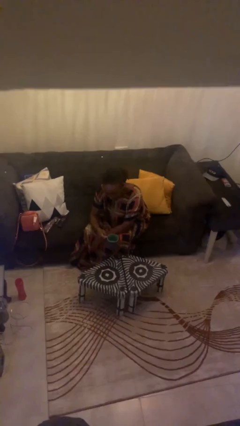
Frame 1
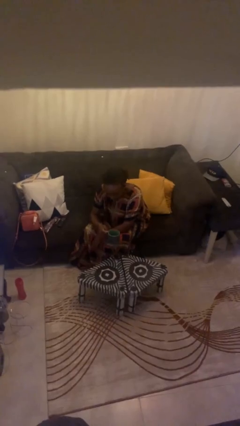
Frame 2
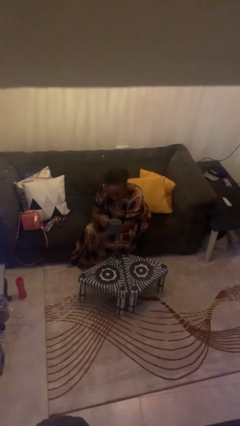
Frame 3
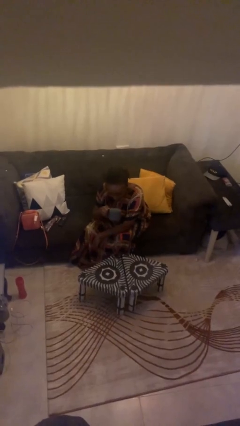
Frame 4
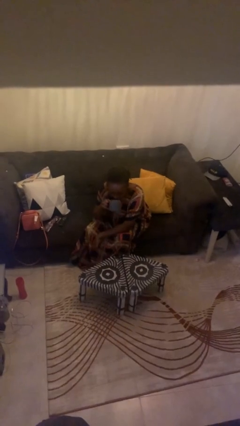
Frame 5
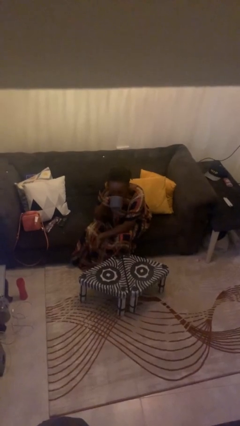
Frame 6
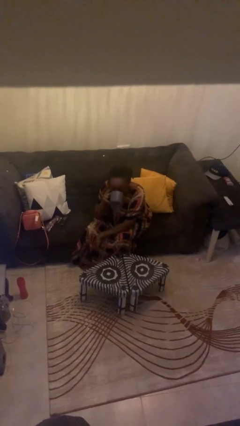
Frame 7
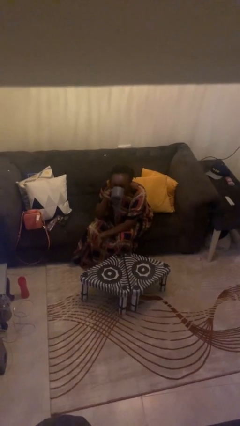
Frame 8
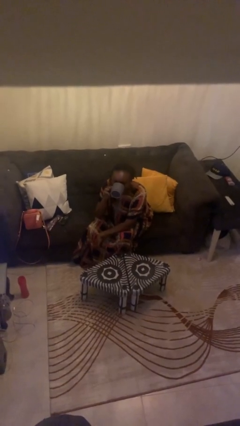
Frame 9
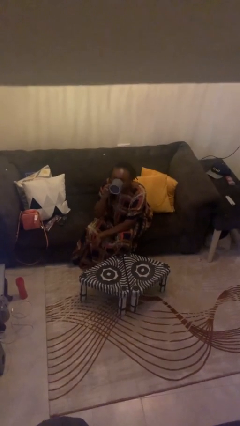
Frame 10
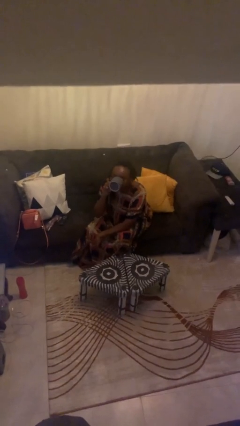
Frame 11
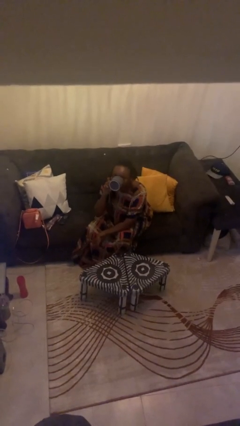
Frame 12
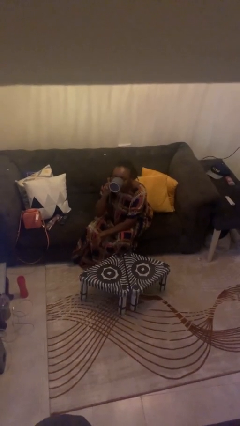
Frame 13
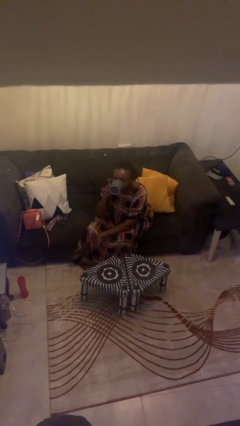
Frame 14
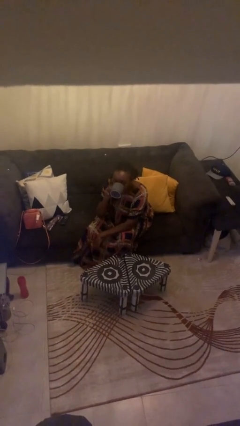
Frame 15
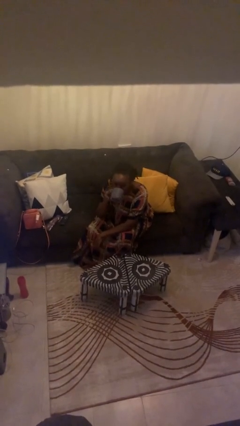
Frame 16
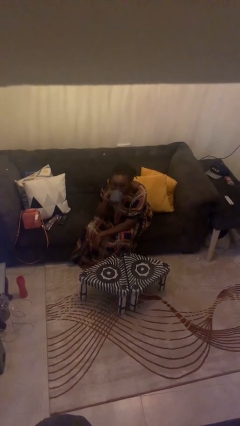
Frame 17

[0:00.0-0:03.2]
person drinks from mug

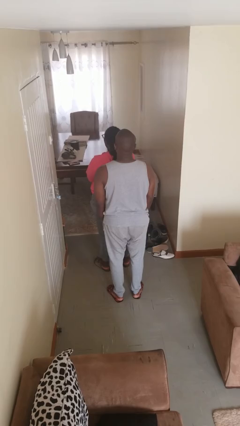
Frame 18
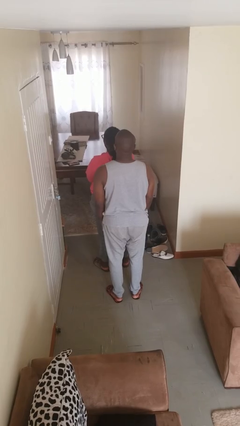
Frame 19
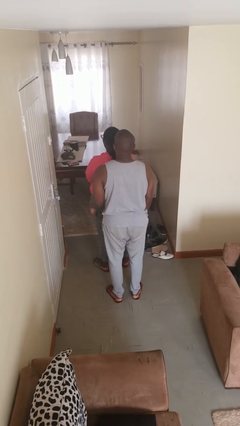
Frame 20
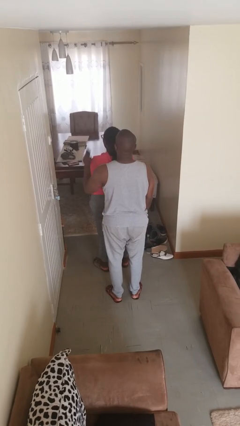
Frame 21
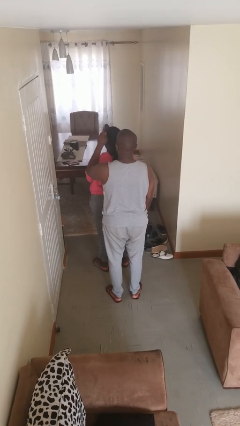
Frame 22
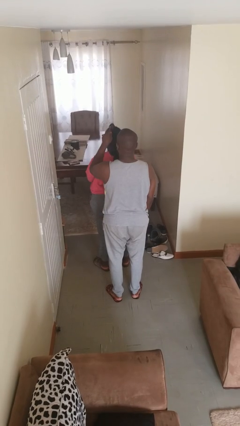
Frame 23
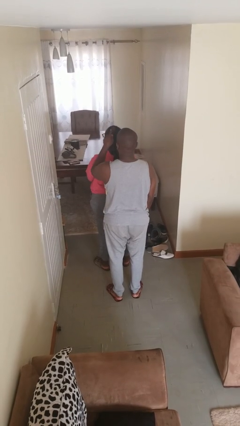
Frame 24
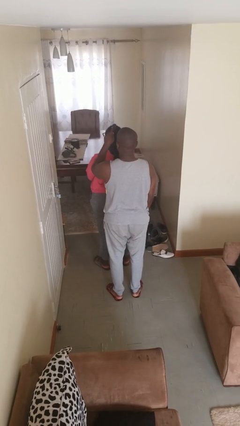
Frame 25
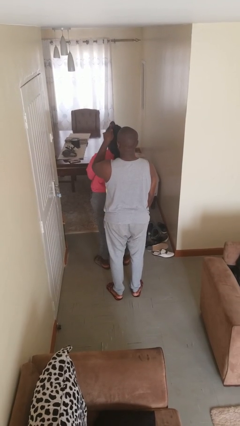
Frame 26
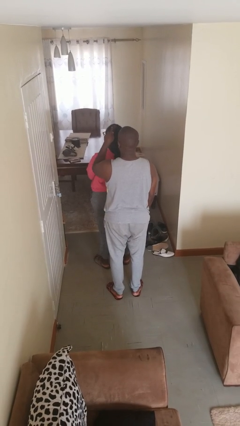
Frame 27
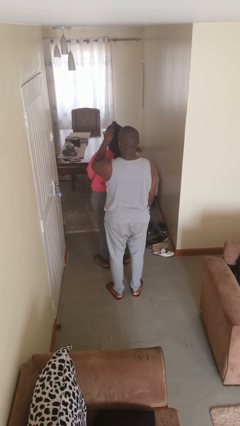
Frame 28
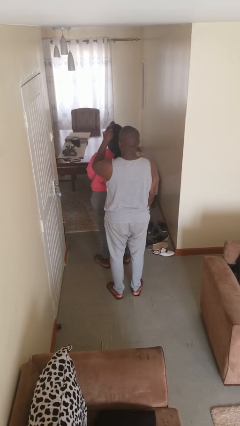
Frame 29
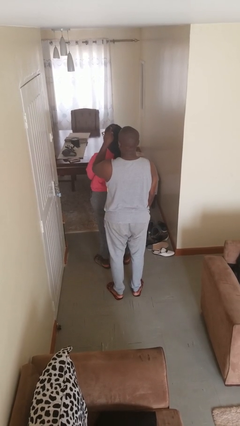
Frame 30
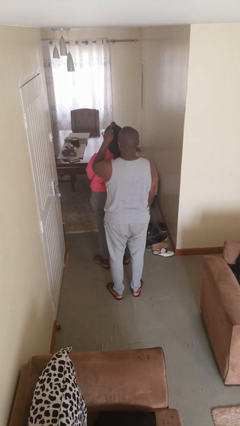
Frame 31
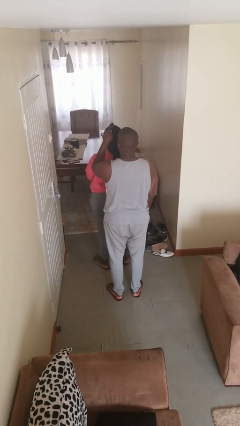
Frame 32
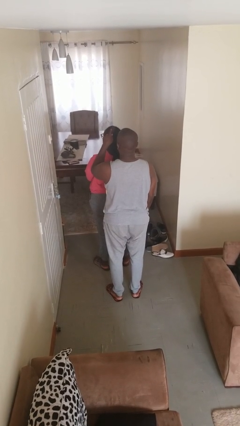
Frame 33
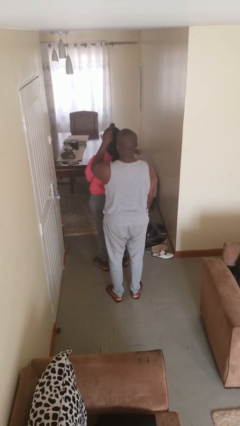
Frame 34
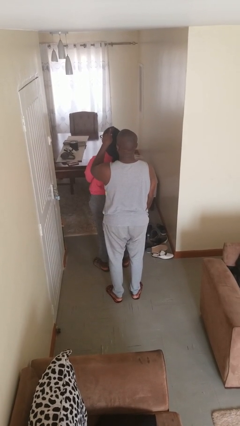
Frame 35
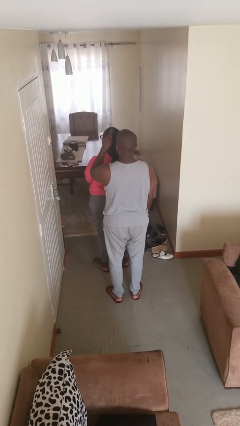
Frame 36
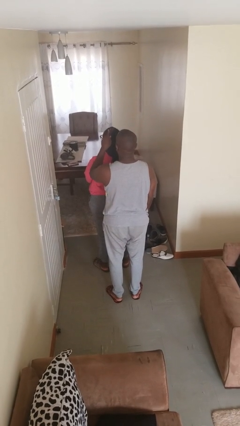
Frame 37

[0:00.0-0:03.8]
person brushes hair of person

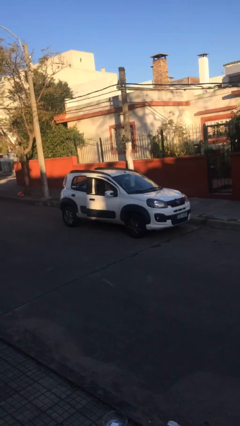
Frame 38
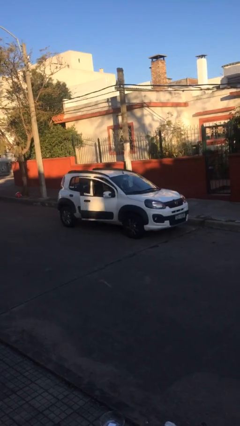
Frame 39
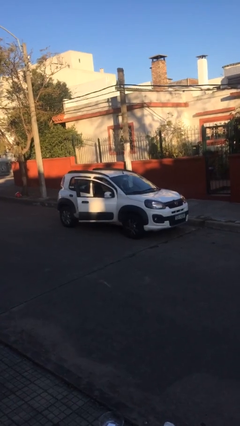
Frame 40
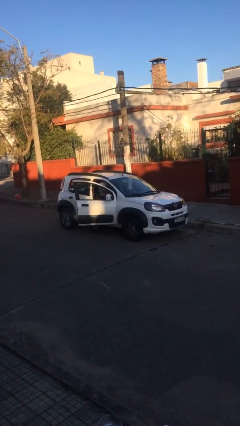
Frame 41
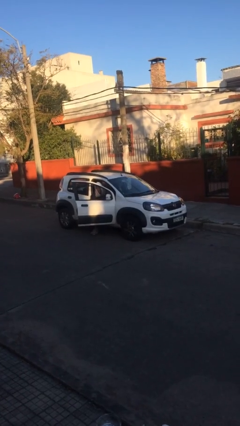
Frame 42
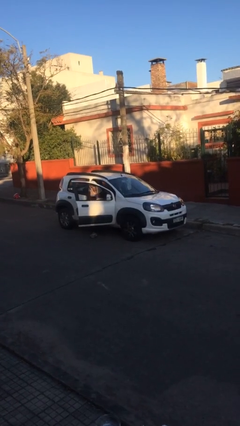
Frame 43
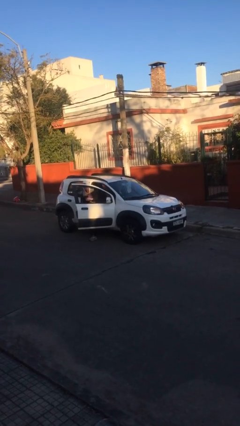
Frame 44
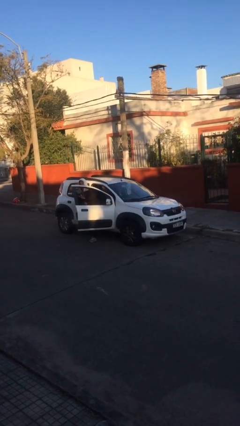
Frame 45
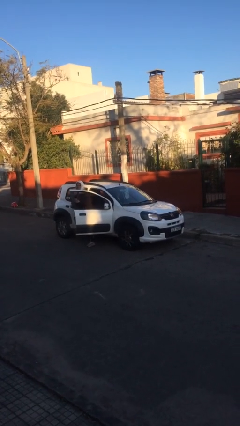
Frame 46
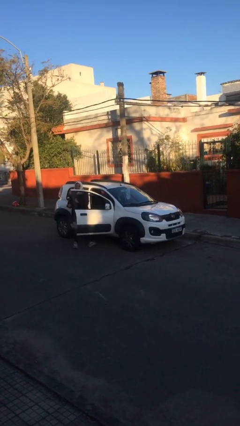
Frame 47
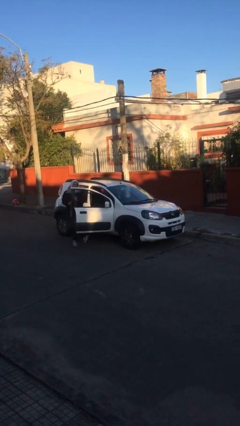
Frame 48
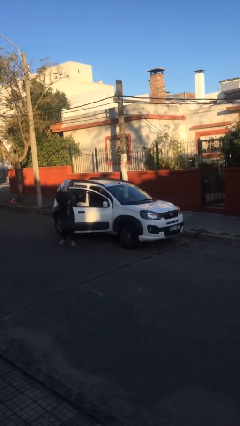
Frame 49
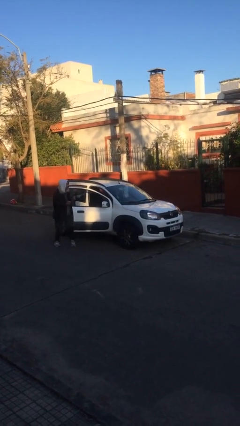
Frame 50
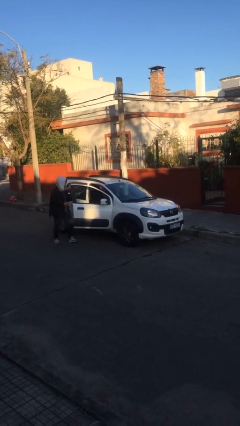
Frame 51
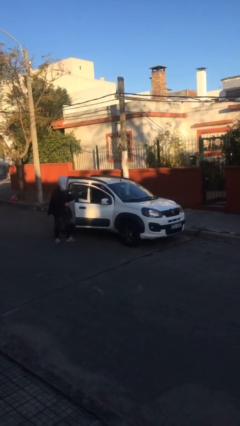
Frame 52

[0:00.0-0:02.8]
car drops off person

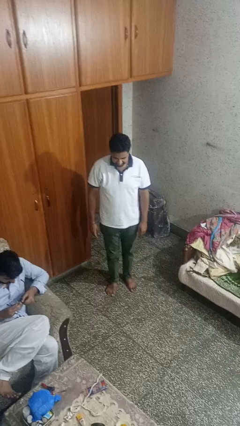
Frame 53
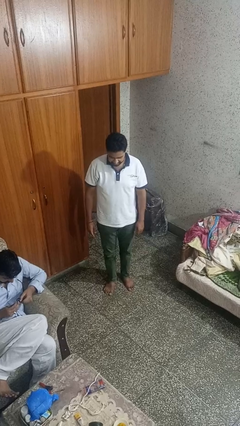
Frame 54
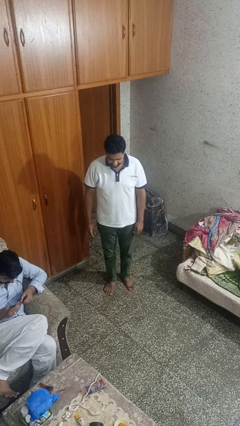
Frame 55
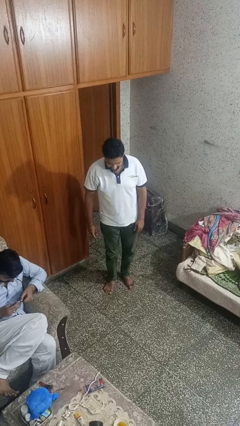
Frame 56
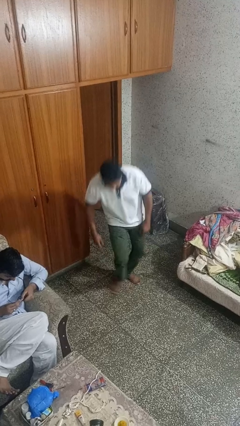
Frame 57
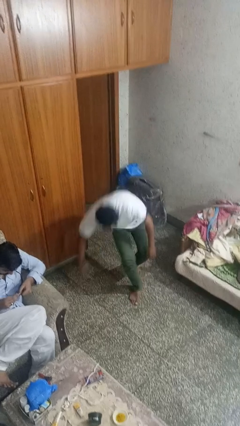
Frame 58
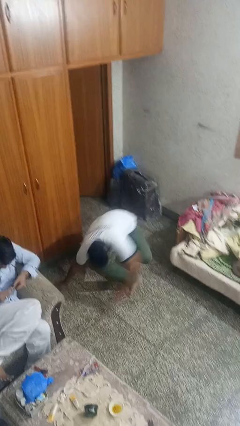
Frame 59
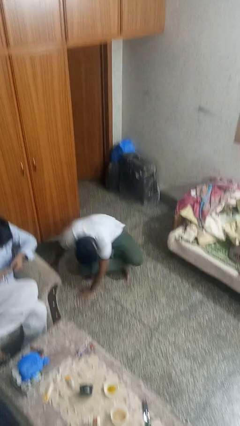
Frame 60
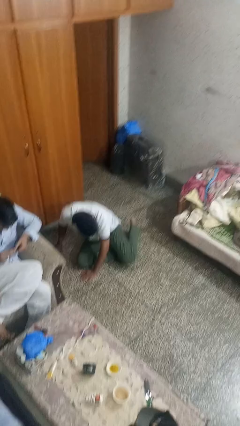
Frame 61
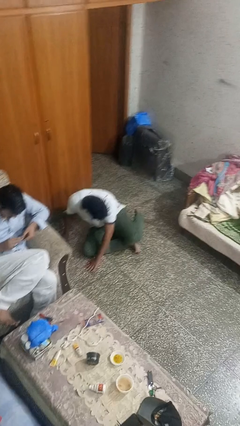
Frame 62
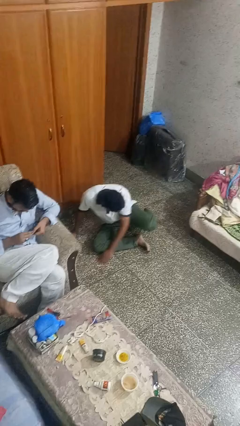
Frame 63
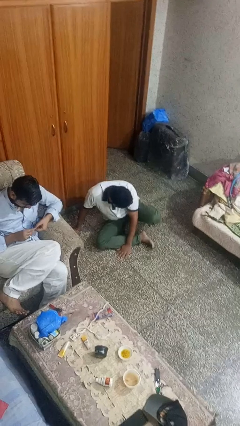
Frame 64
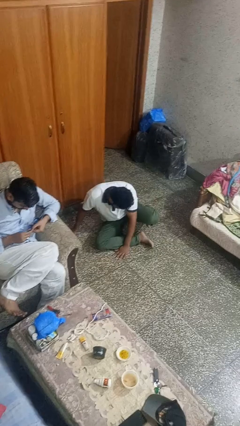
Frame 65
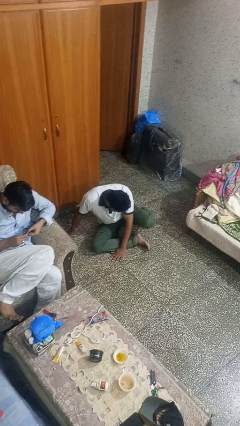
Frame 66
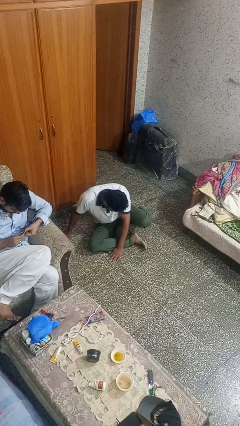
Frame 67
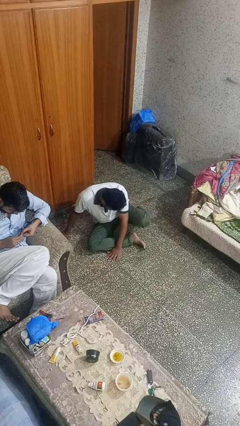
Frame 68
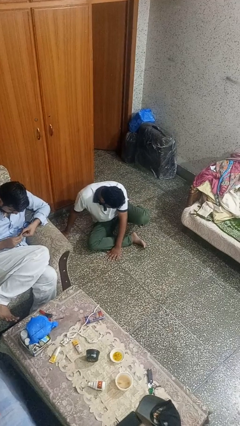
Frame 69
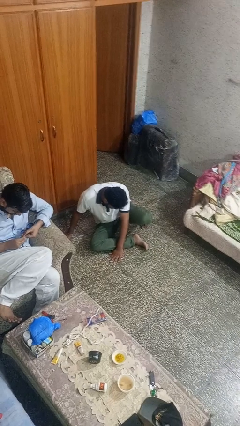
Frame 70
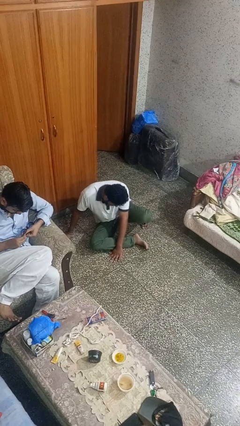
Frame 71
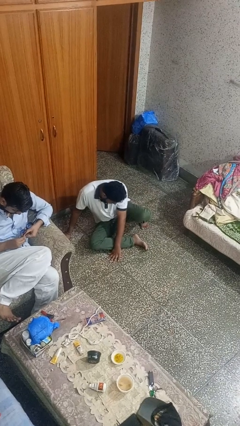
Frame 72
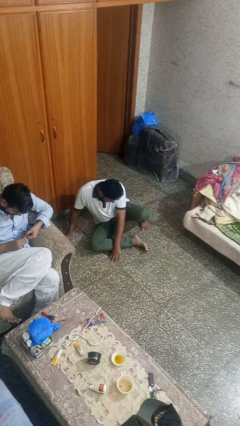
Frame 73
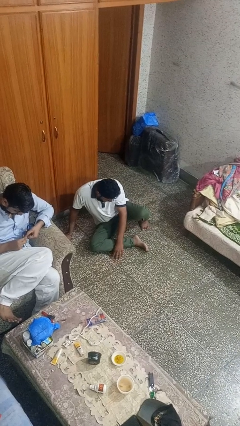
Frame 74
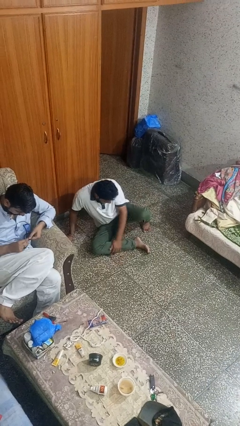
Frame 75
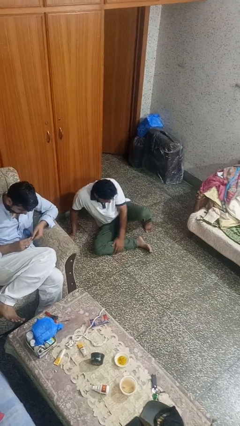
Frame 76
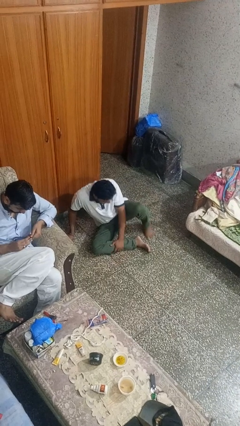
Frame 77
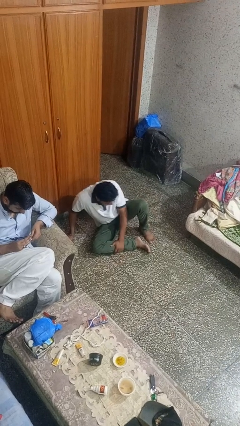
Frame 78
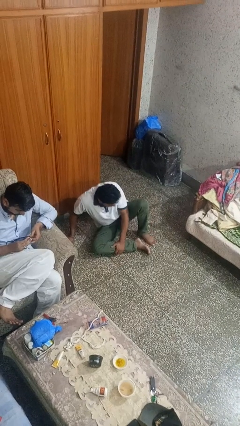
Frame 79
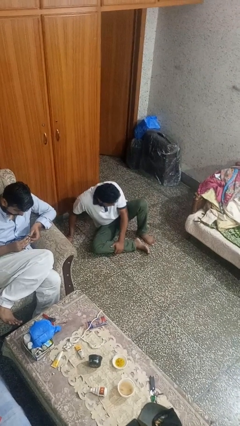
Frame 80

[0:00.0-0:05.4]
person falls while standing

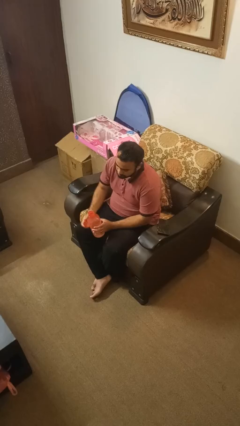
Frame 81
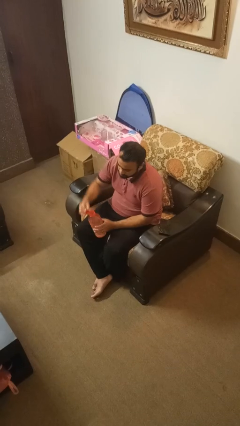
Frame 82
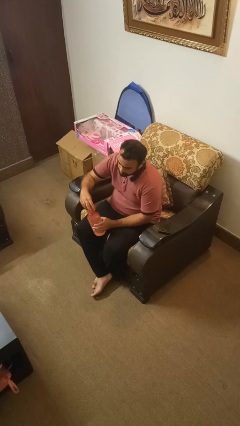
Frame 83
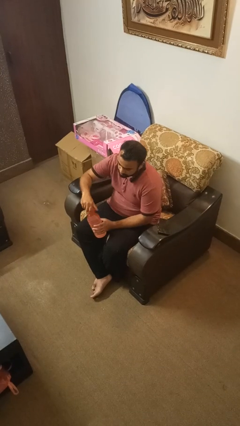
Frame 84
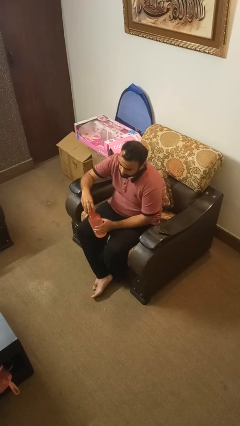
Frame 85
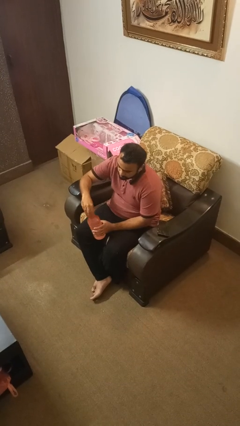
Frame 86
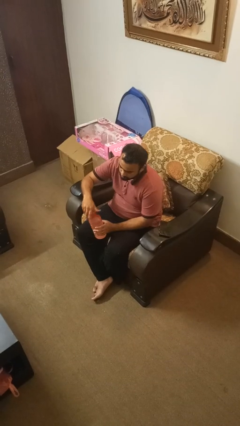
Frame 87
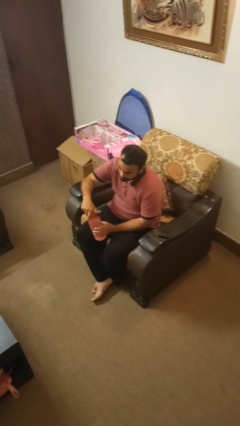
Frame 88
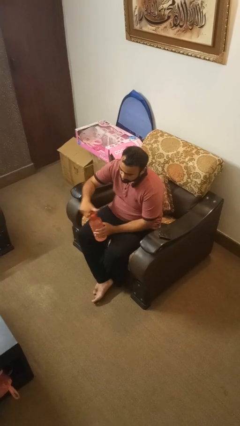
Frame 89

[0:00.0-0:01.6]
person screws lid to bottle

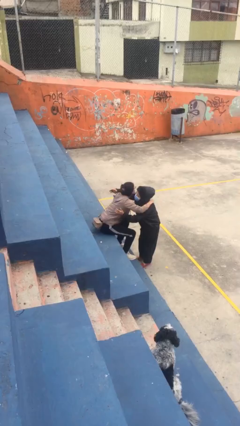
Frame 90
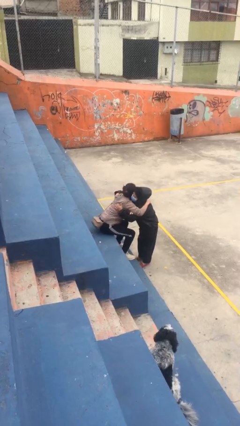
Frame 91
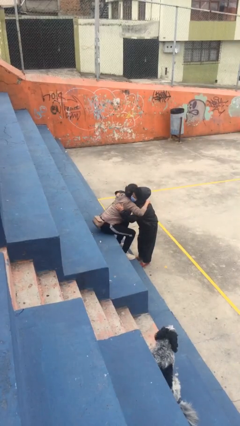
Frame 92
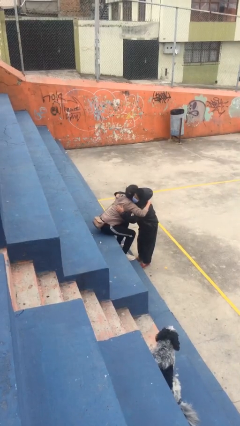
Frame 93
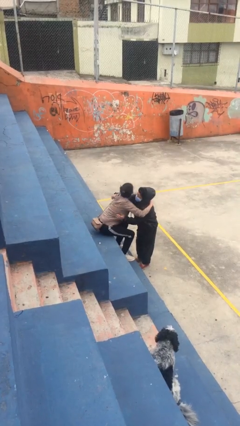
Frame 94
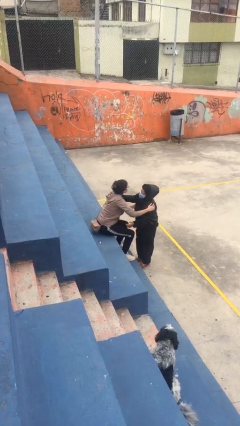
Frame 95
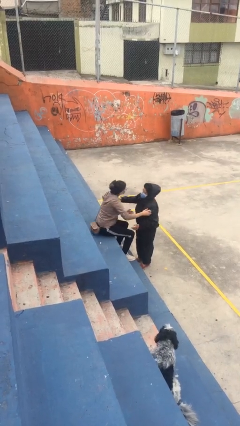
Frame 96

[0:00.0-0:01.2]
person embraces person
